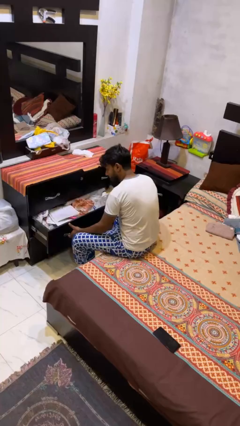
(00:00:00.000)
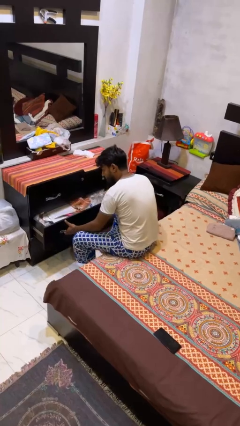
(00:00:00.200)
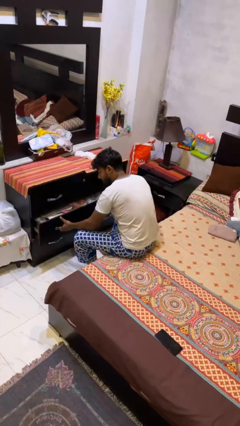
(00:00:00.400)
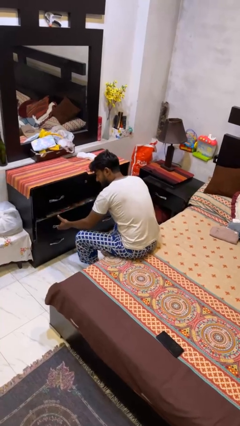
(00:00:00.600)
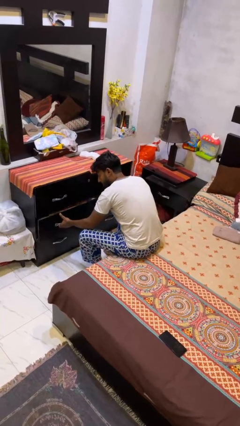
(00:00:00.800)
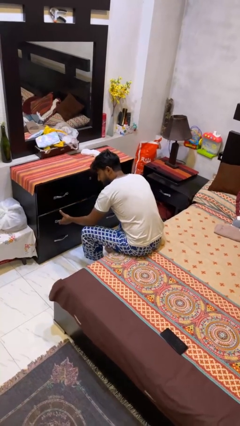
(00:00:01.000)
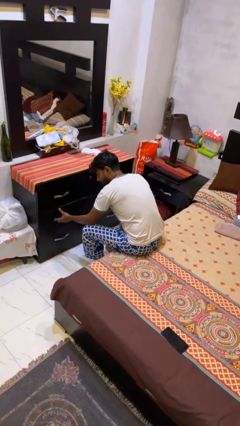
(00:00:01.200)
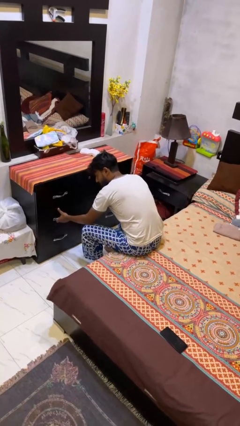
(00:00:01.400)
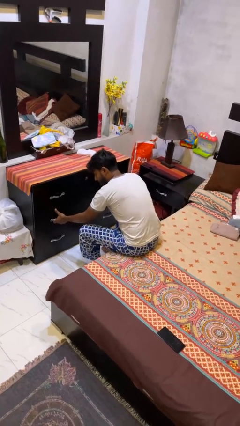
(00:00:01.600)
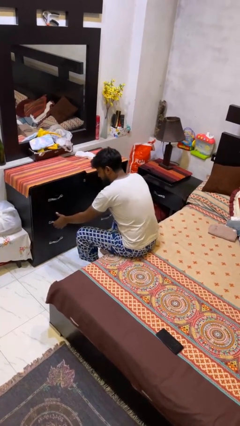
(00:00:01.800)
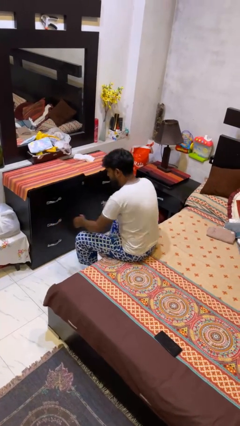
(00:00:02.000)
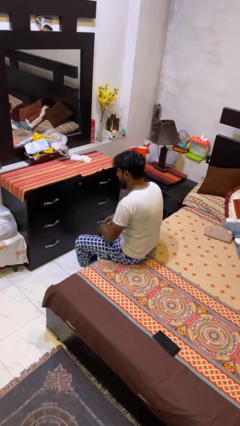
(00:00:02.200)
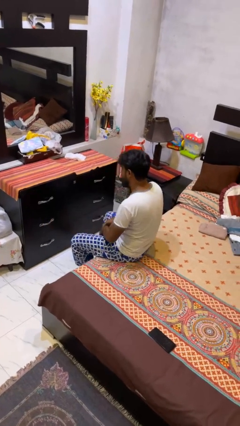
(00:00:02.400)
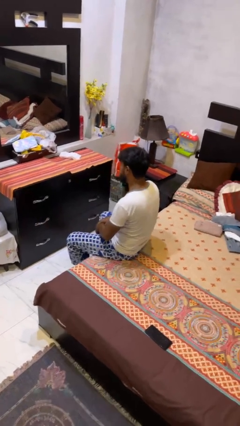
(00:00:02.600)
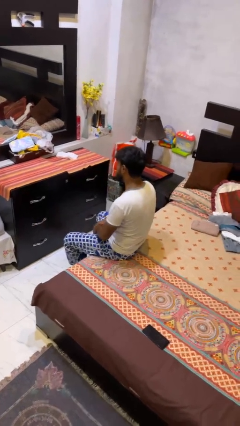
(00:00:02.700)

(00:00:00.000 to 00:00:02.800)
person closes dresser drawer

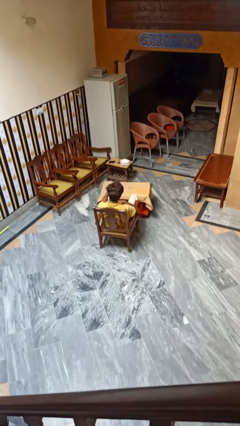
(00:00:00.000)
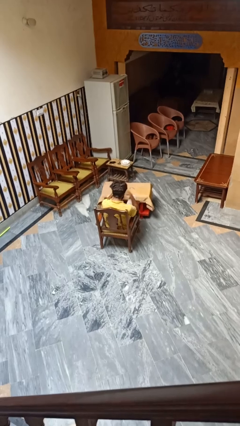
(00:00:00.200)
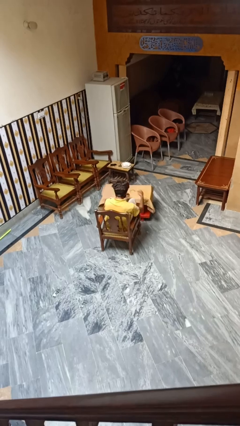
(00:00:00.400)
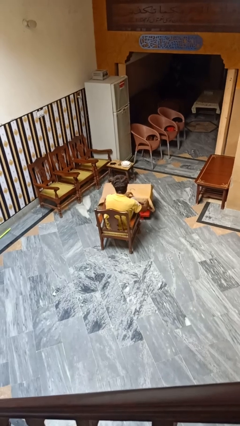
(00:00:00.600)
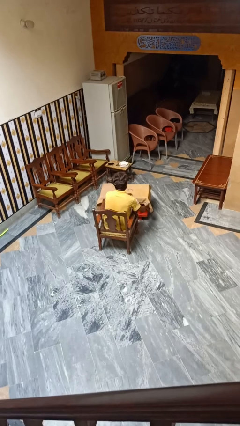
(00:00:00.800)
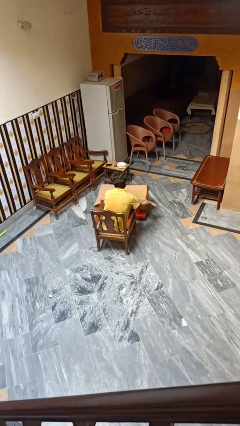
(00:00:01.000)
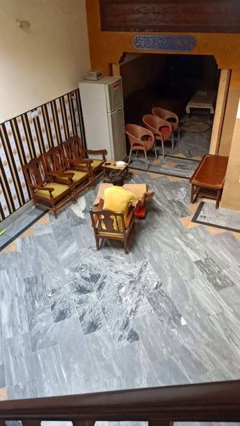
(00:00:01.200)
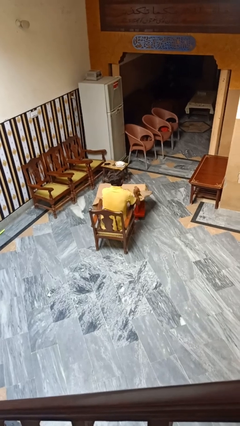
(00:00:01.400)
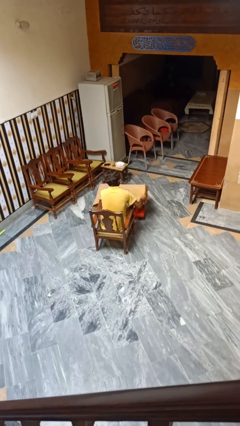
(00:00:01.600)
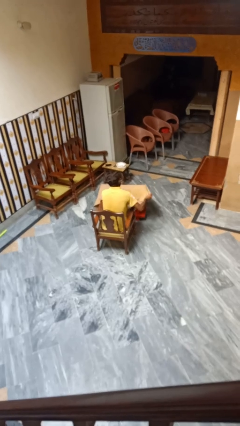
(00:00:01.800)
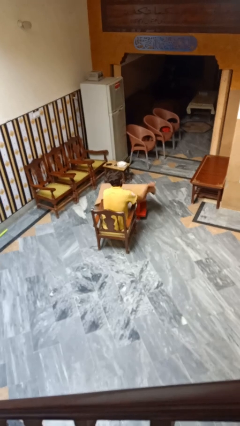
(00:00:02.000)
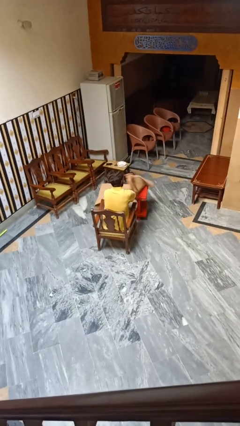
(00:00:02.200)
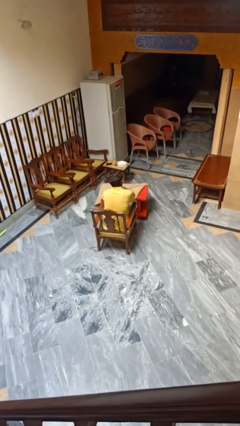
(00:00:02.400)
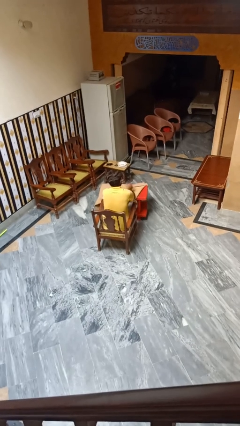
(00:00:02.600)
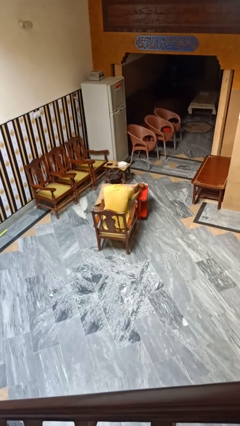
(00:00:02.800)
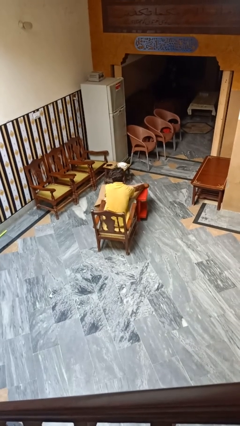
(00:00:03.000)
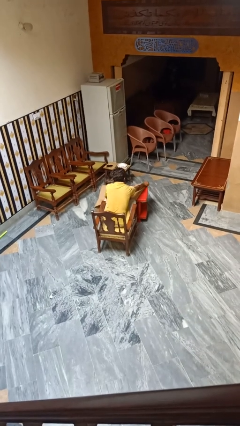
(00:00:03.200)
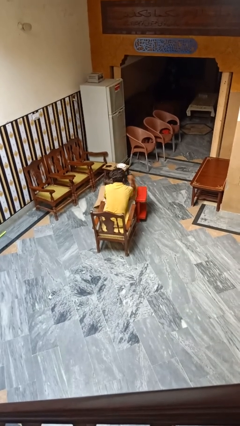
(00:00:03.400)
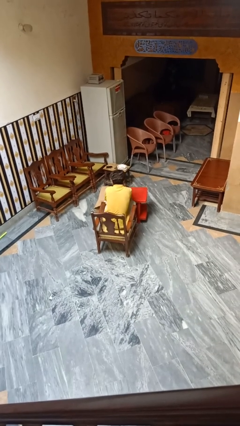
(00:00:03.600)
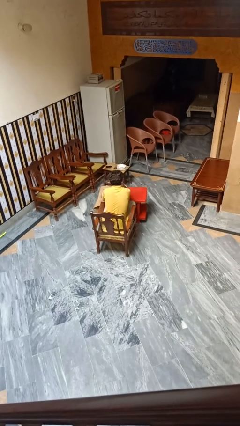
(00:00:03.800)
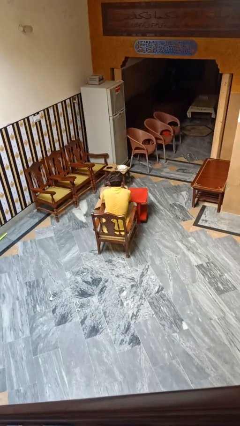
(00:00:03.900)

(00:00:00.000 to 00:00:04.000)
person spreads tablecloth

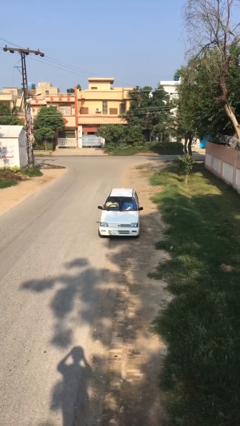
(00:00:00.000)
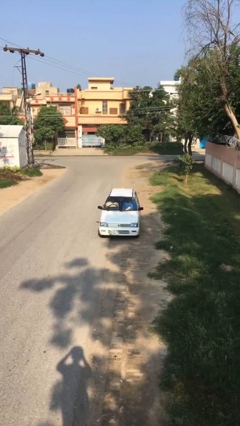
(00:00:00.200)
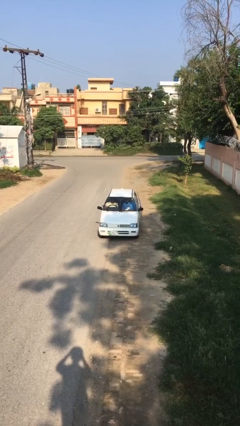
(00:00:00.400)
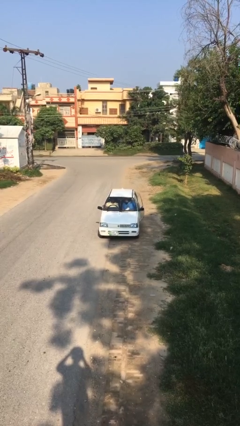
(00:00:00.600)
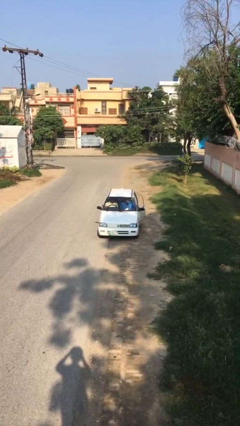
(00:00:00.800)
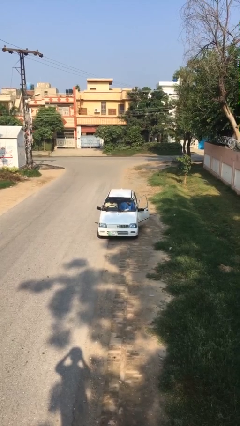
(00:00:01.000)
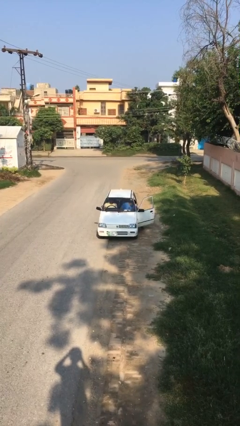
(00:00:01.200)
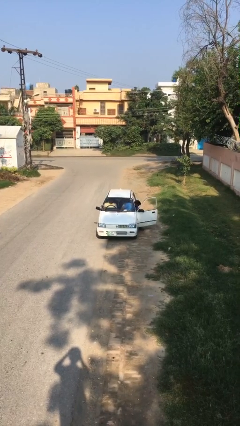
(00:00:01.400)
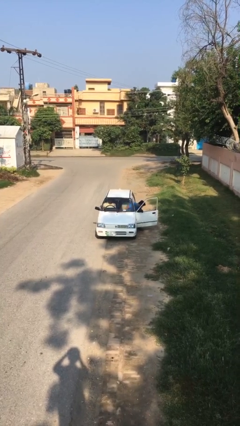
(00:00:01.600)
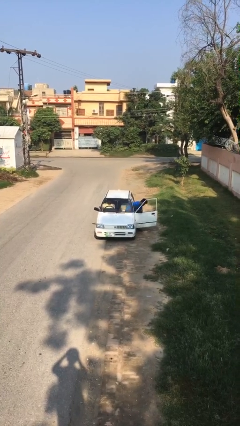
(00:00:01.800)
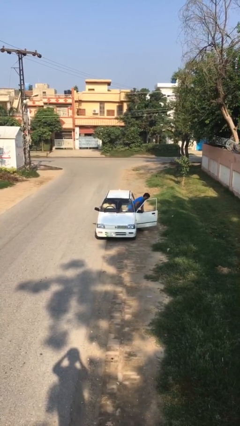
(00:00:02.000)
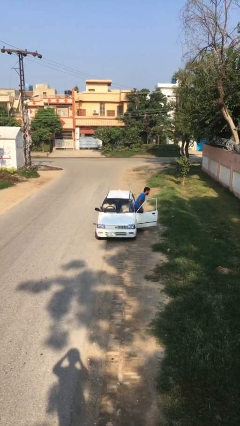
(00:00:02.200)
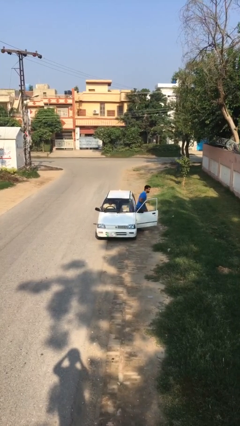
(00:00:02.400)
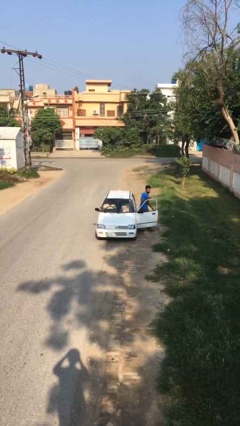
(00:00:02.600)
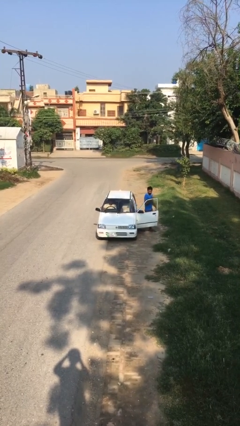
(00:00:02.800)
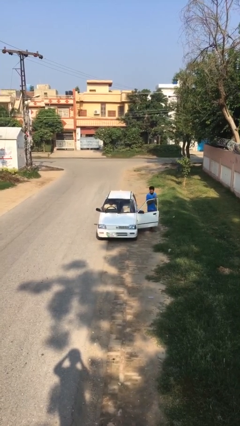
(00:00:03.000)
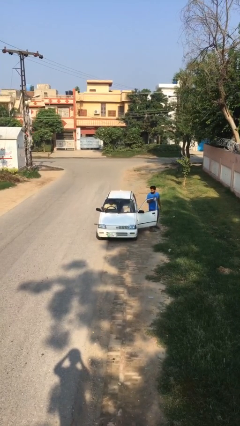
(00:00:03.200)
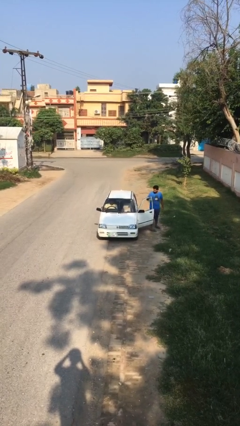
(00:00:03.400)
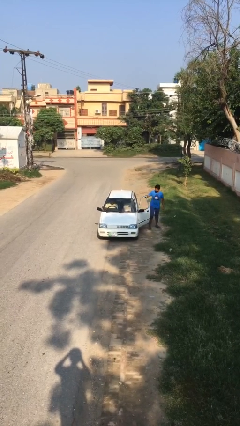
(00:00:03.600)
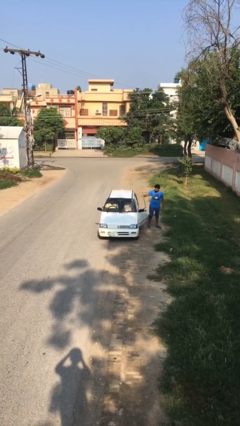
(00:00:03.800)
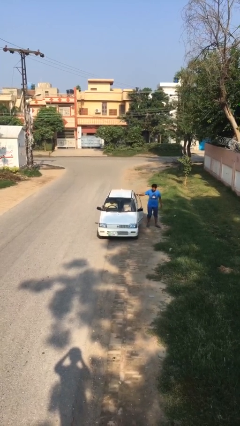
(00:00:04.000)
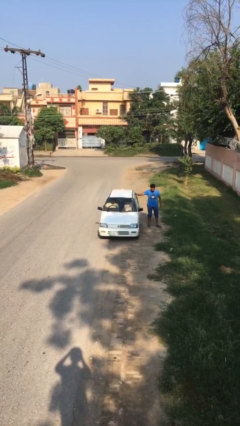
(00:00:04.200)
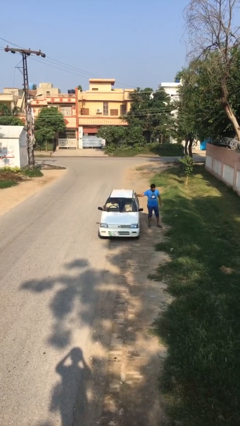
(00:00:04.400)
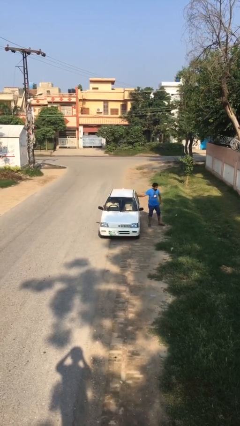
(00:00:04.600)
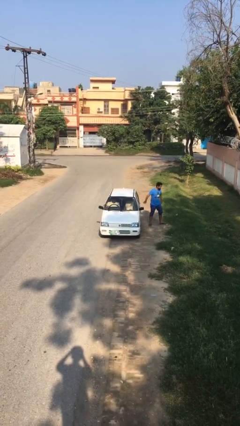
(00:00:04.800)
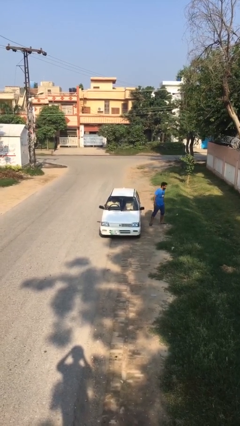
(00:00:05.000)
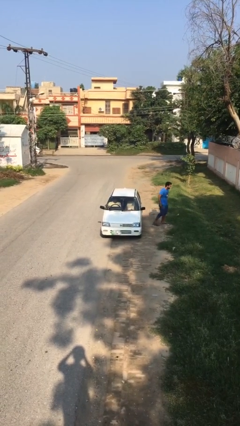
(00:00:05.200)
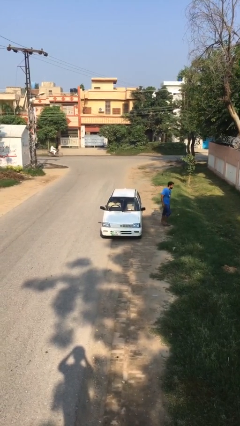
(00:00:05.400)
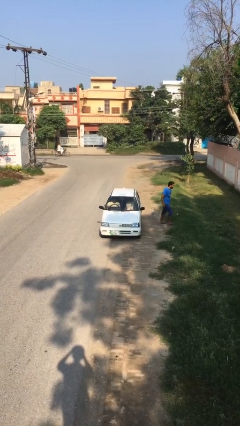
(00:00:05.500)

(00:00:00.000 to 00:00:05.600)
car drops off person

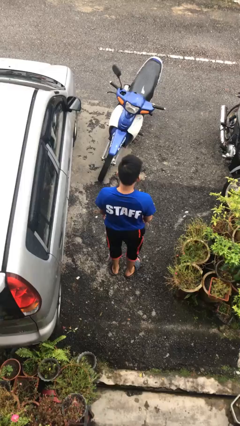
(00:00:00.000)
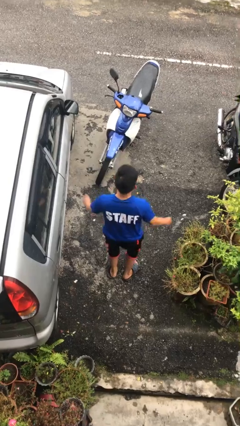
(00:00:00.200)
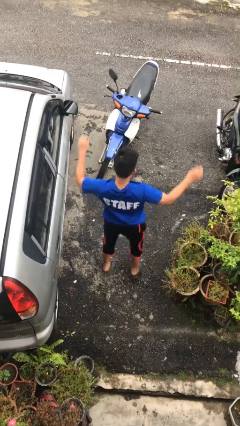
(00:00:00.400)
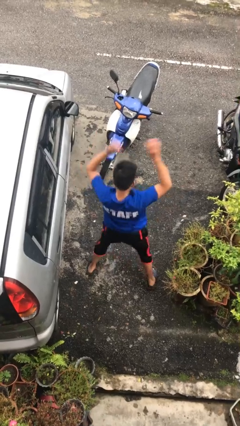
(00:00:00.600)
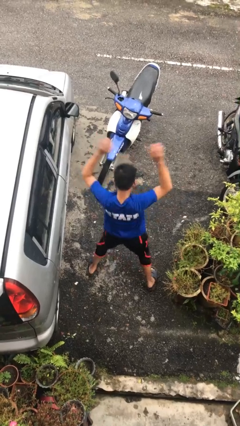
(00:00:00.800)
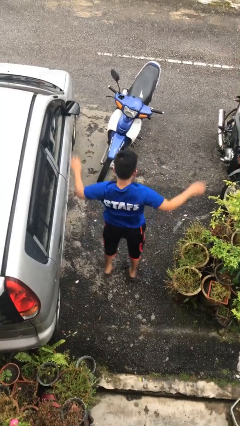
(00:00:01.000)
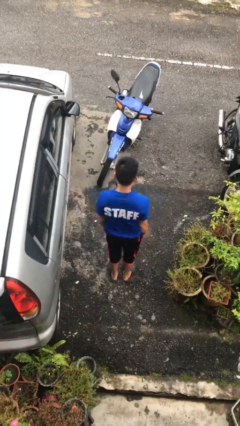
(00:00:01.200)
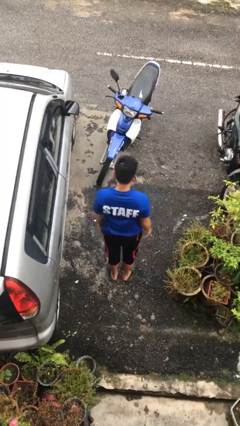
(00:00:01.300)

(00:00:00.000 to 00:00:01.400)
person exercises with jumping jacks

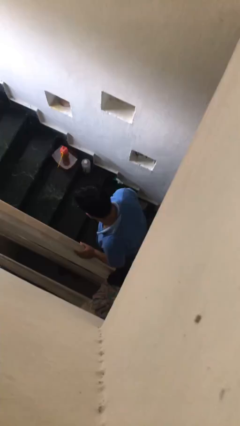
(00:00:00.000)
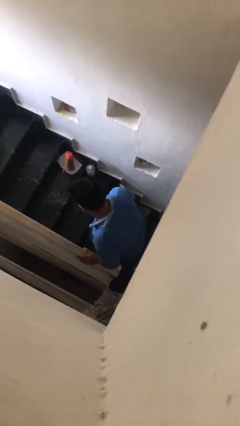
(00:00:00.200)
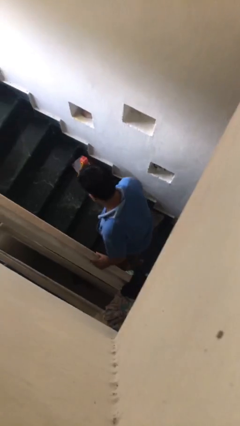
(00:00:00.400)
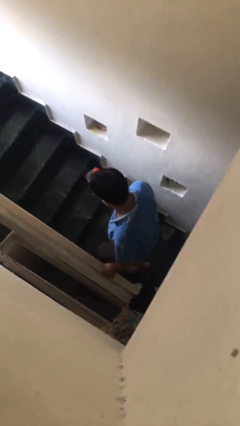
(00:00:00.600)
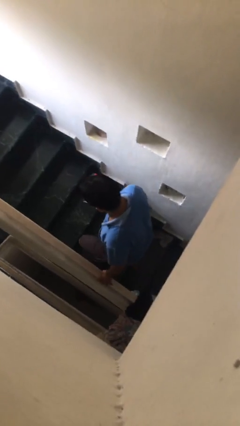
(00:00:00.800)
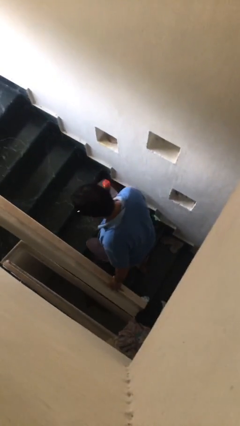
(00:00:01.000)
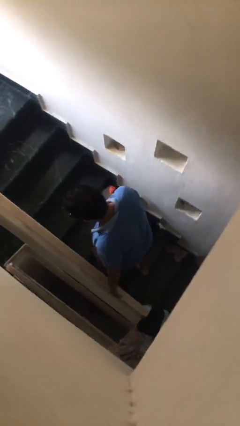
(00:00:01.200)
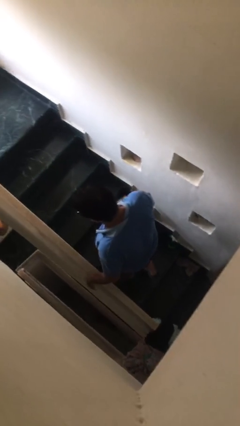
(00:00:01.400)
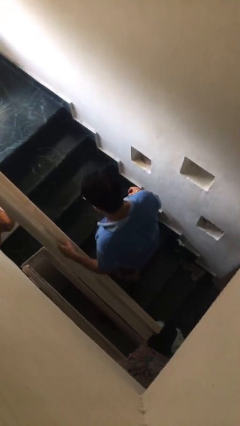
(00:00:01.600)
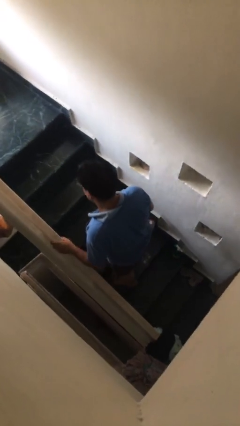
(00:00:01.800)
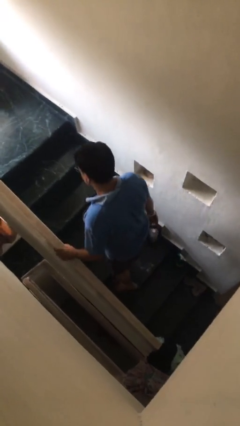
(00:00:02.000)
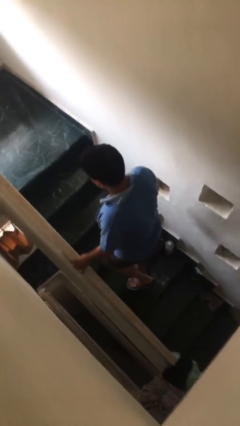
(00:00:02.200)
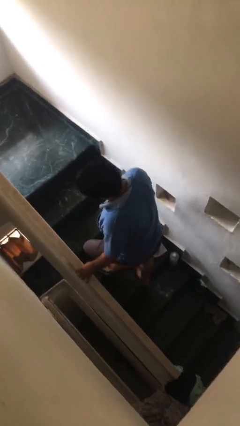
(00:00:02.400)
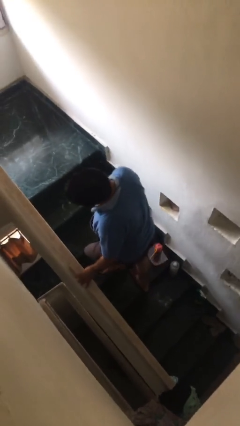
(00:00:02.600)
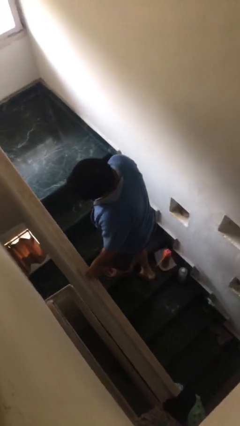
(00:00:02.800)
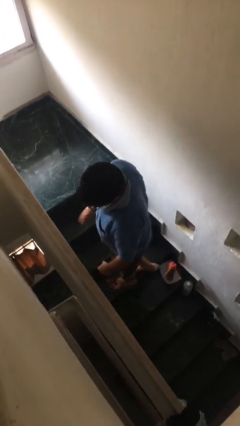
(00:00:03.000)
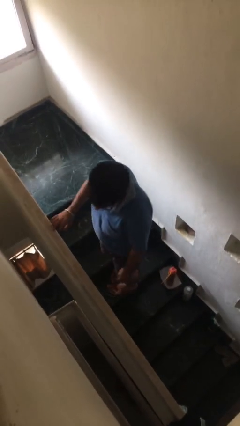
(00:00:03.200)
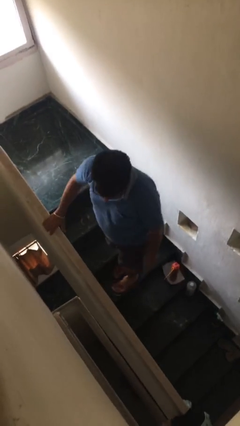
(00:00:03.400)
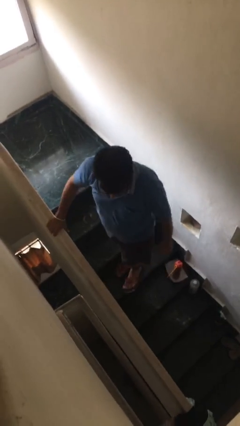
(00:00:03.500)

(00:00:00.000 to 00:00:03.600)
person climbs up stairs
